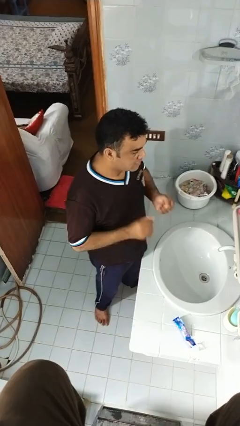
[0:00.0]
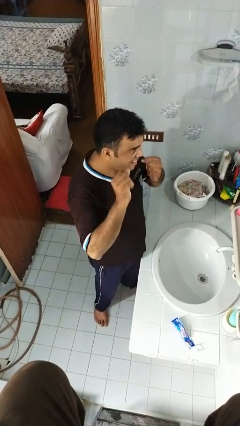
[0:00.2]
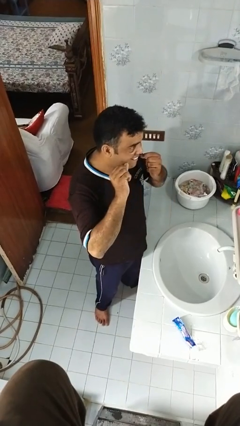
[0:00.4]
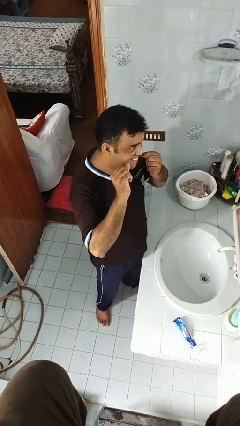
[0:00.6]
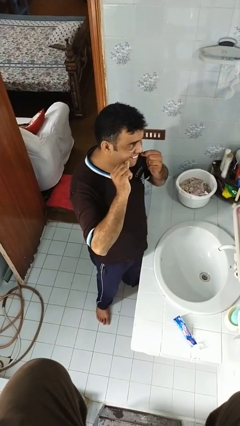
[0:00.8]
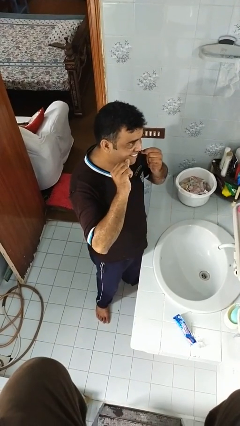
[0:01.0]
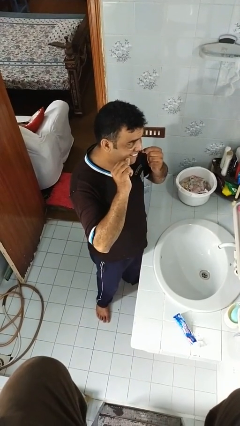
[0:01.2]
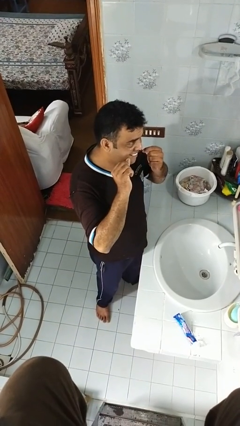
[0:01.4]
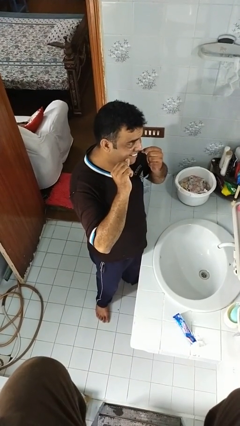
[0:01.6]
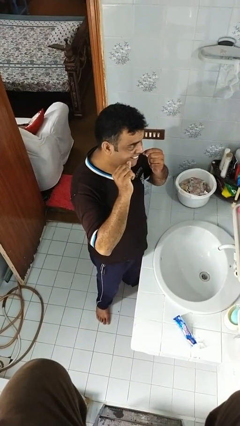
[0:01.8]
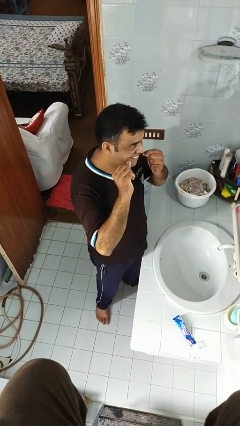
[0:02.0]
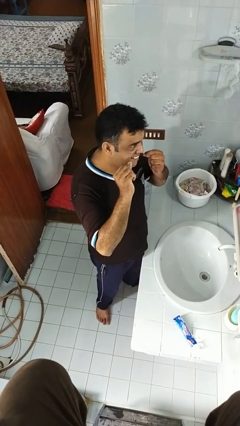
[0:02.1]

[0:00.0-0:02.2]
person flosses

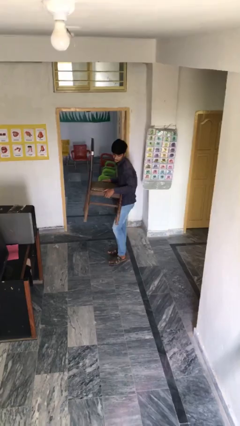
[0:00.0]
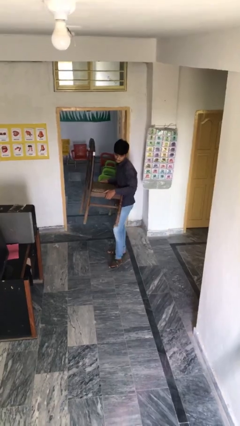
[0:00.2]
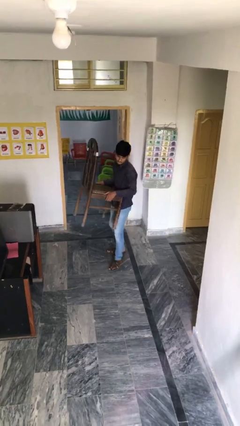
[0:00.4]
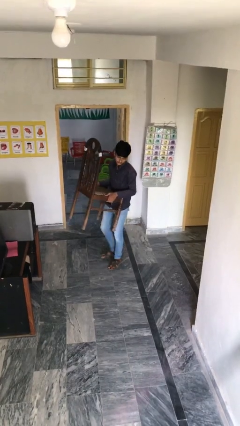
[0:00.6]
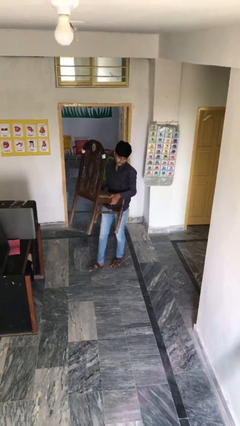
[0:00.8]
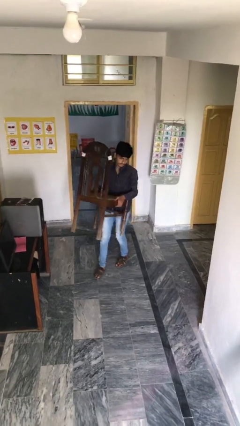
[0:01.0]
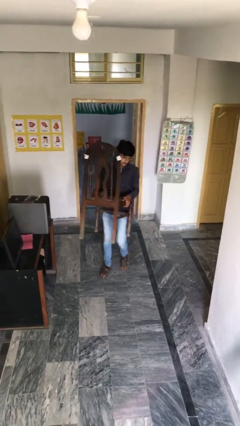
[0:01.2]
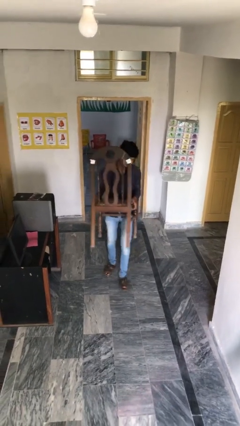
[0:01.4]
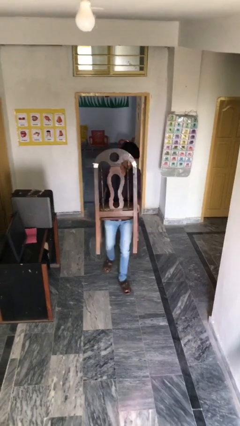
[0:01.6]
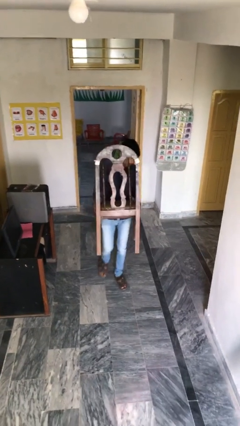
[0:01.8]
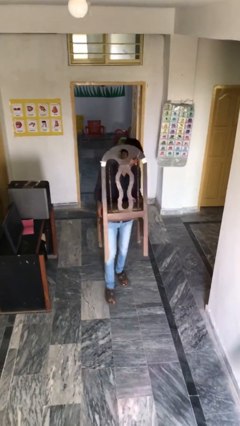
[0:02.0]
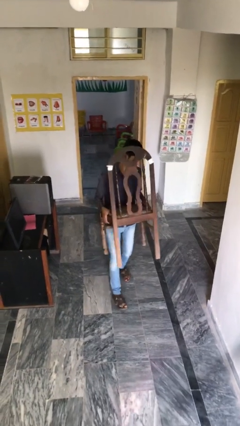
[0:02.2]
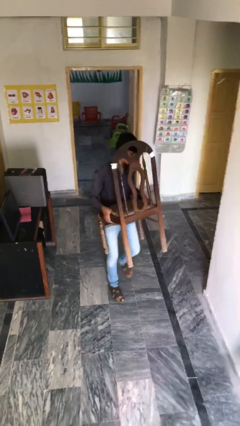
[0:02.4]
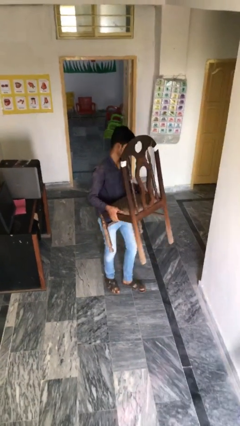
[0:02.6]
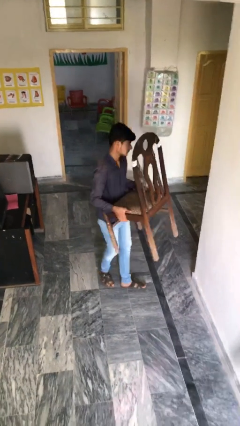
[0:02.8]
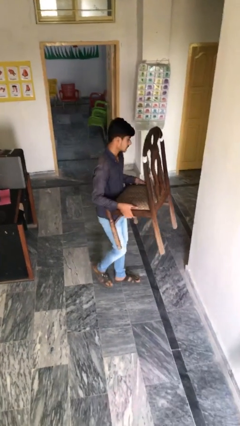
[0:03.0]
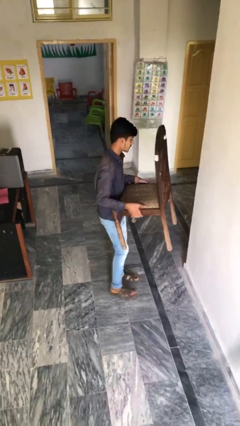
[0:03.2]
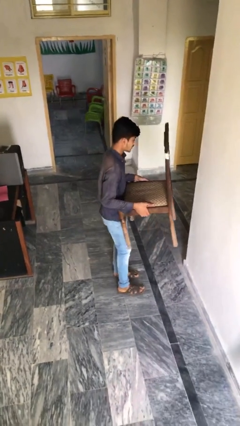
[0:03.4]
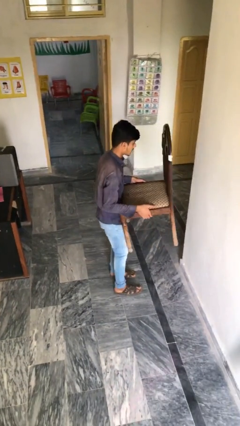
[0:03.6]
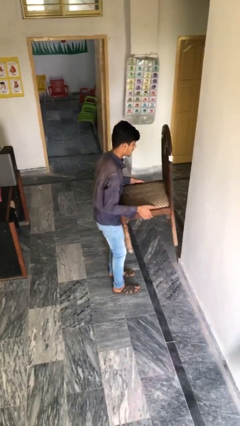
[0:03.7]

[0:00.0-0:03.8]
person carries heavy object

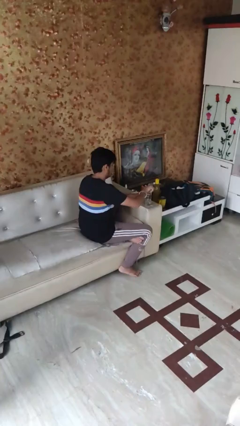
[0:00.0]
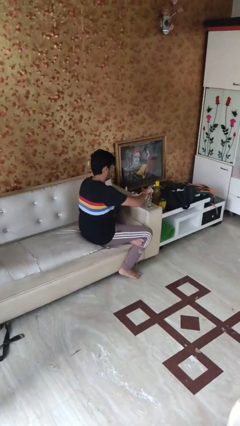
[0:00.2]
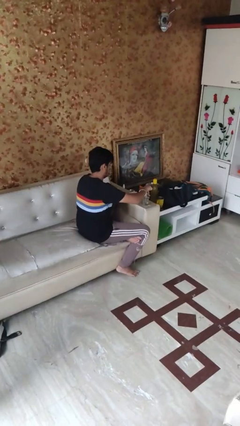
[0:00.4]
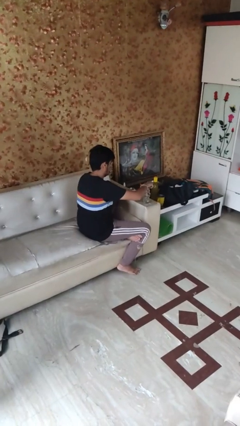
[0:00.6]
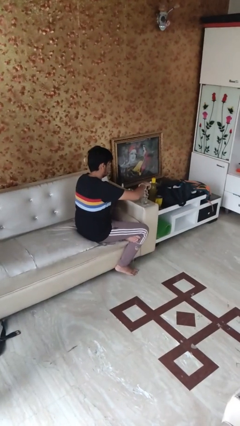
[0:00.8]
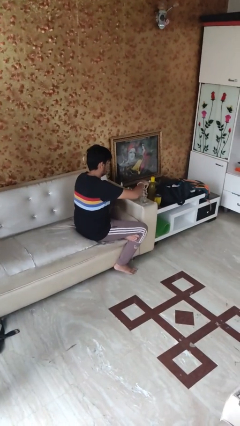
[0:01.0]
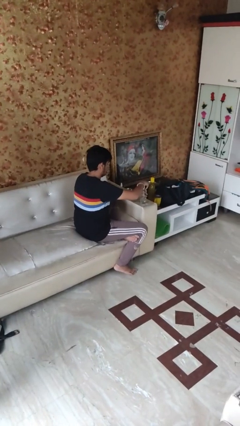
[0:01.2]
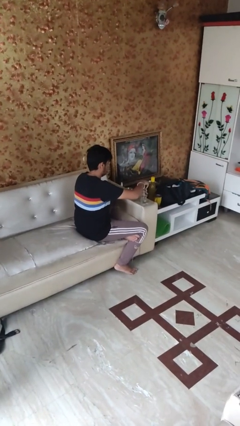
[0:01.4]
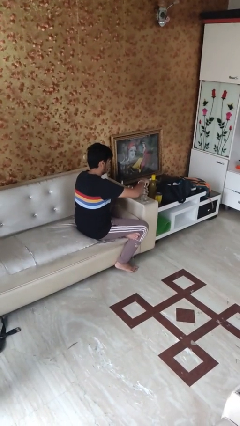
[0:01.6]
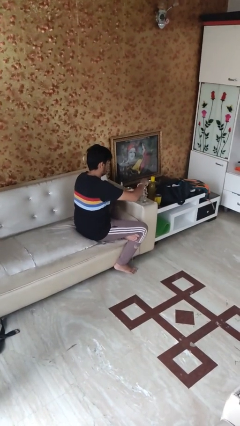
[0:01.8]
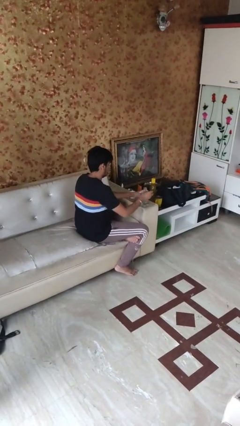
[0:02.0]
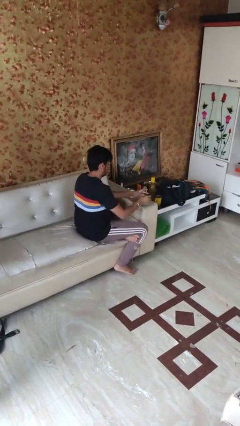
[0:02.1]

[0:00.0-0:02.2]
person unscrews lid from bottle

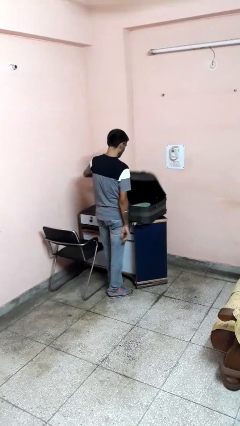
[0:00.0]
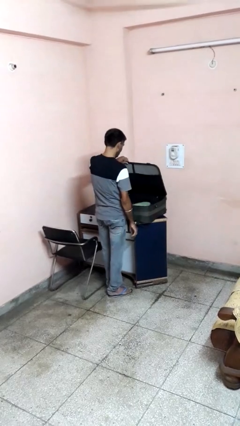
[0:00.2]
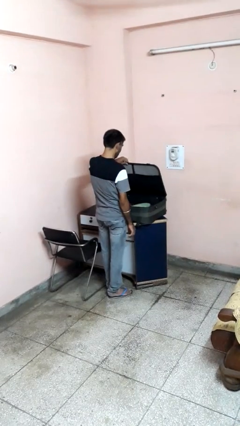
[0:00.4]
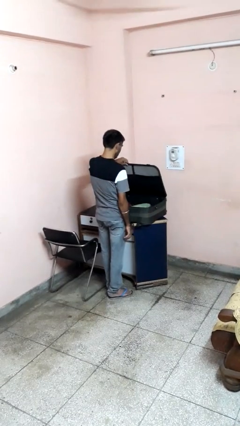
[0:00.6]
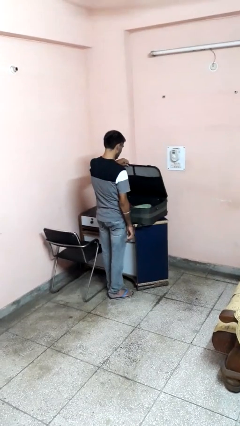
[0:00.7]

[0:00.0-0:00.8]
person opens suitcase

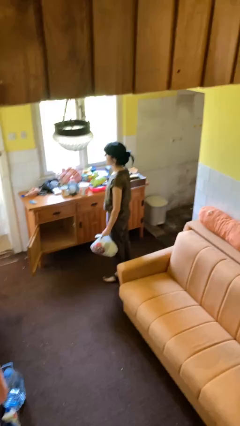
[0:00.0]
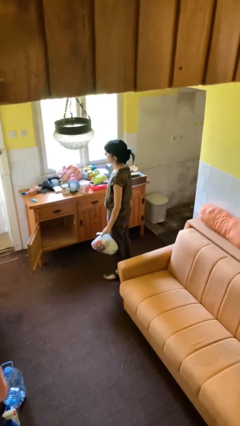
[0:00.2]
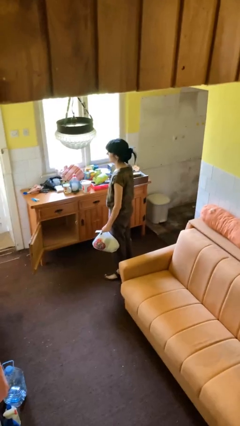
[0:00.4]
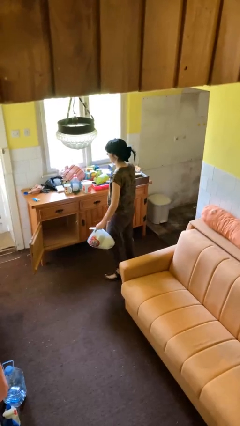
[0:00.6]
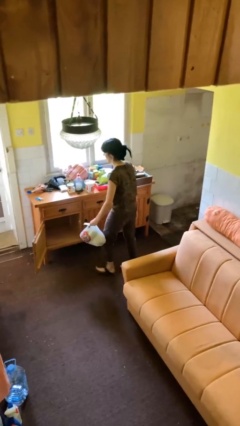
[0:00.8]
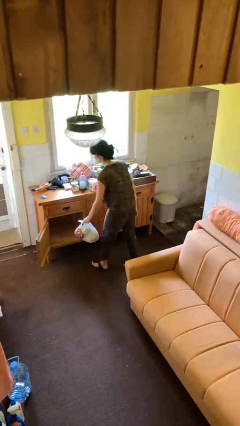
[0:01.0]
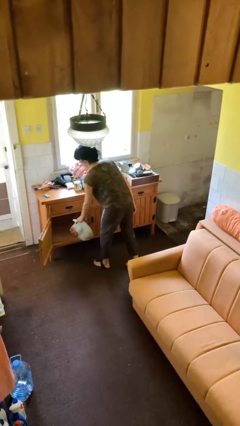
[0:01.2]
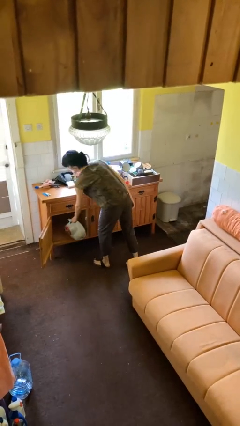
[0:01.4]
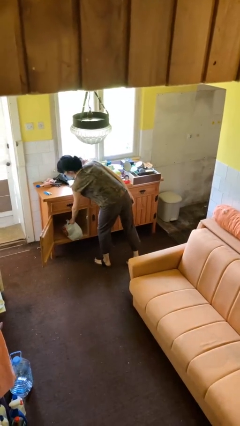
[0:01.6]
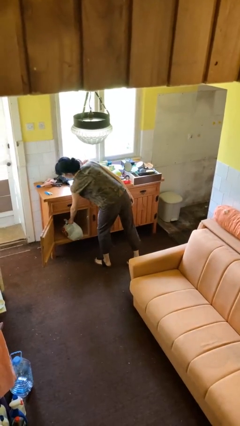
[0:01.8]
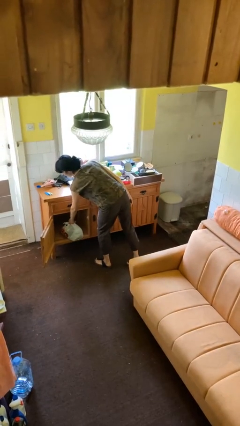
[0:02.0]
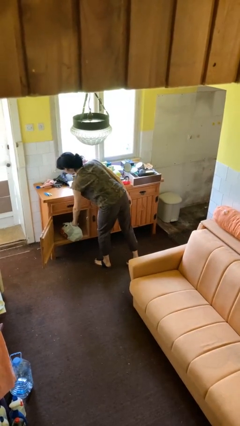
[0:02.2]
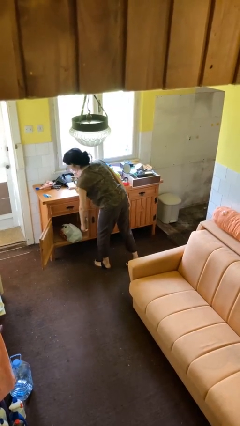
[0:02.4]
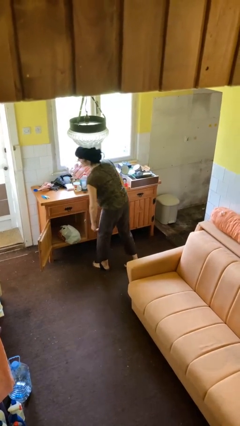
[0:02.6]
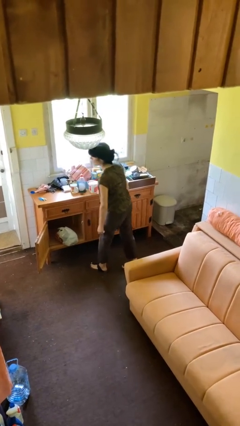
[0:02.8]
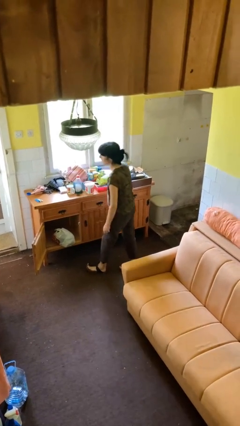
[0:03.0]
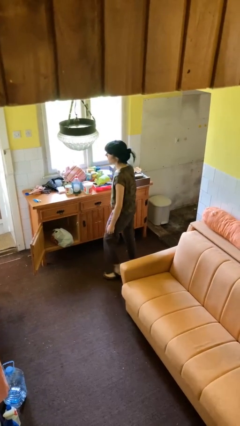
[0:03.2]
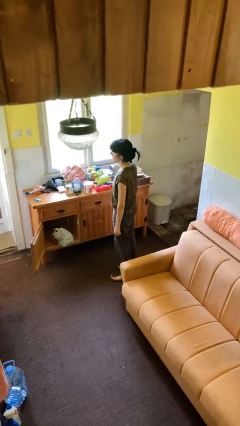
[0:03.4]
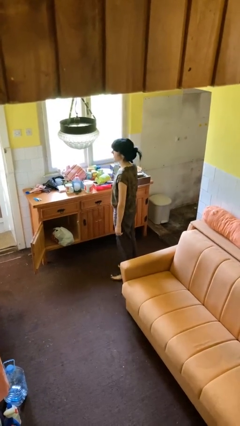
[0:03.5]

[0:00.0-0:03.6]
person puts down object into cabinet

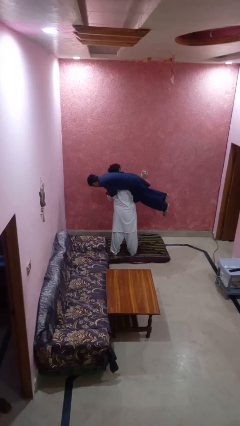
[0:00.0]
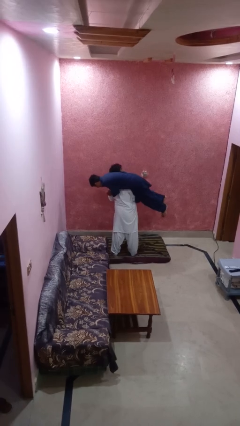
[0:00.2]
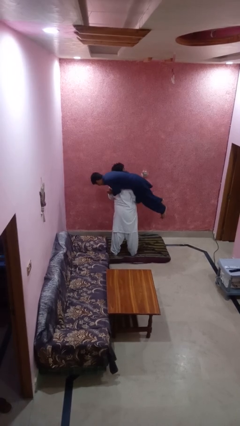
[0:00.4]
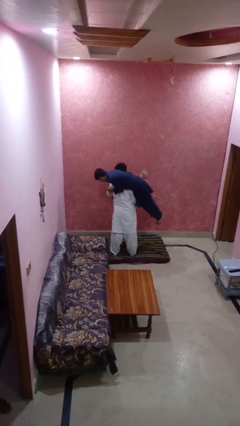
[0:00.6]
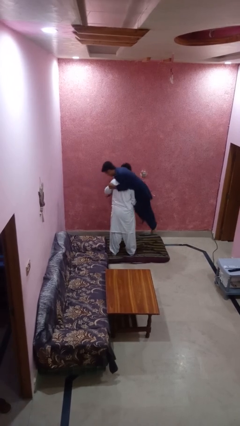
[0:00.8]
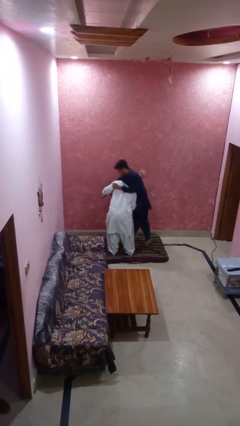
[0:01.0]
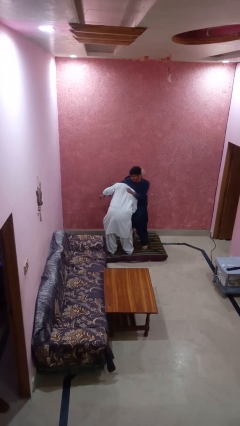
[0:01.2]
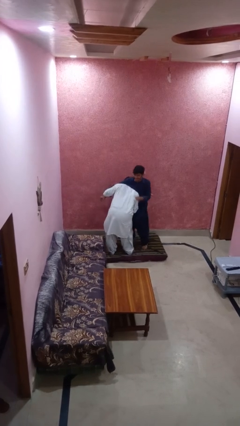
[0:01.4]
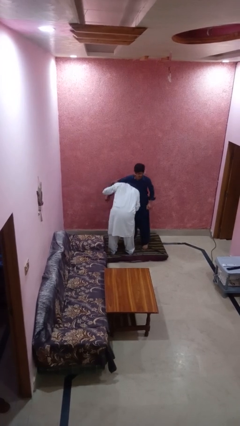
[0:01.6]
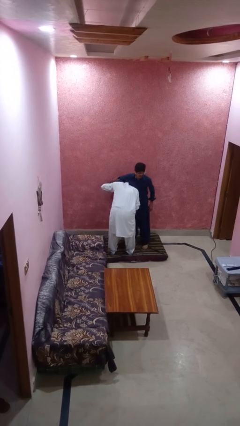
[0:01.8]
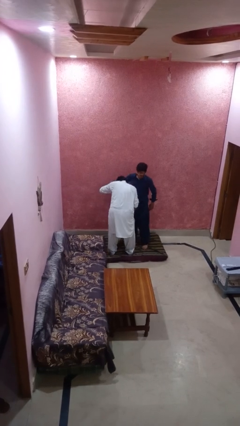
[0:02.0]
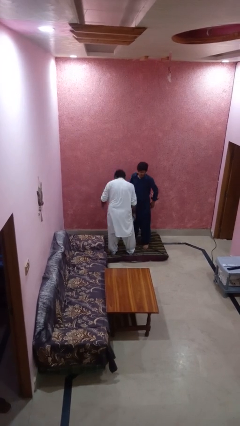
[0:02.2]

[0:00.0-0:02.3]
person puts down person

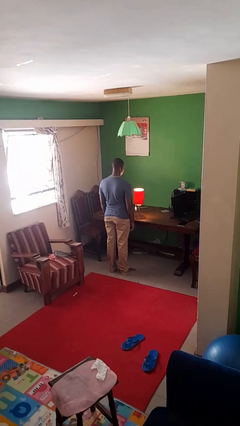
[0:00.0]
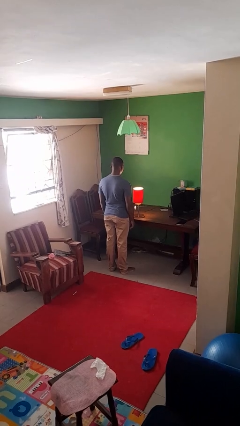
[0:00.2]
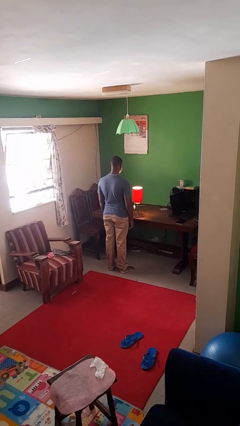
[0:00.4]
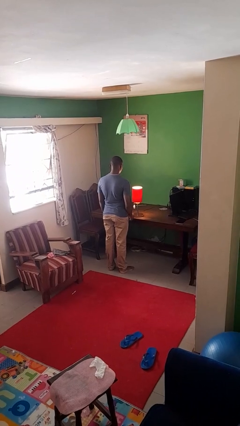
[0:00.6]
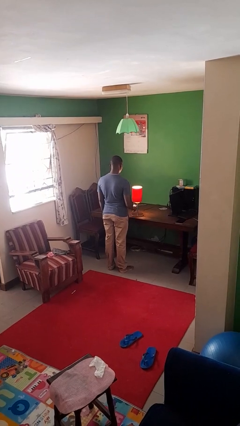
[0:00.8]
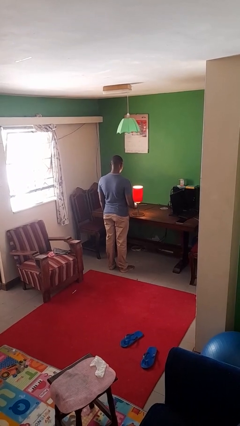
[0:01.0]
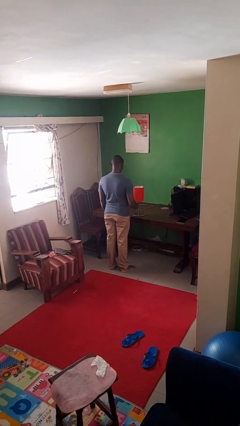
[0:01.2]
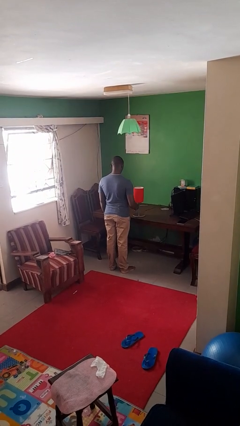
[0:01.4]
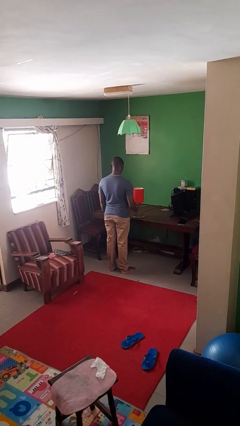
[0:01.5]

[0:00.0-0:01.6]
person turns off lamp

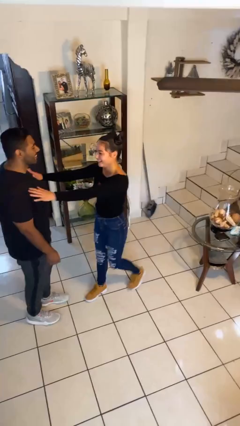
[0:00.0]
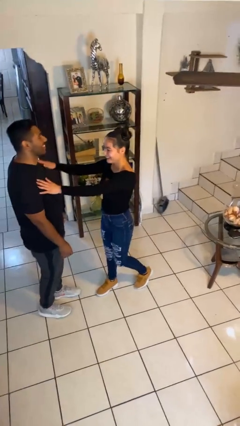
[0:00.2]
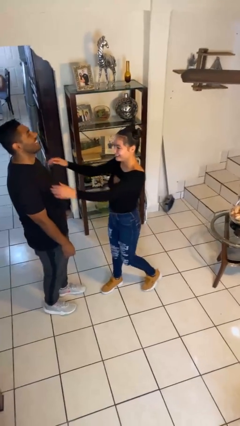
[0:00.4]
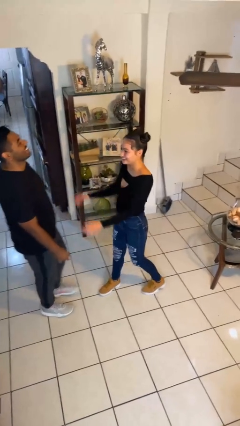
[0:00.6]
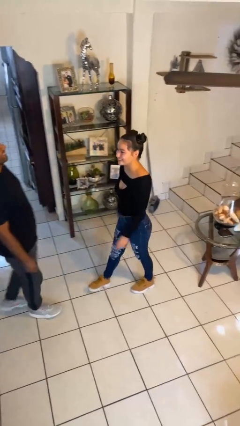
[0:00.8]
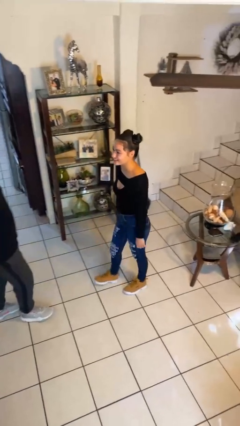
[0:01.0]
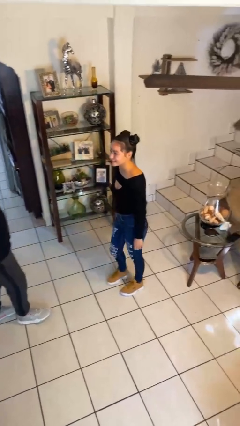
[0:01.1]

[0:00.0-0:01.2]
person shoves person
